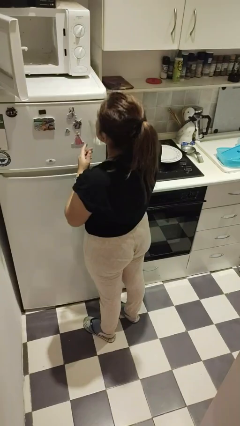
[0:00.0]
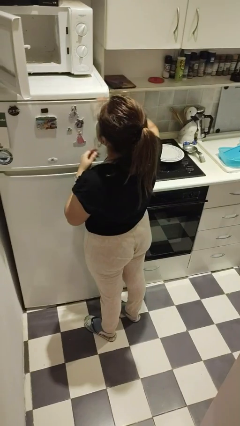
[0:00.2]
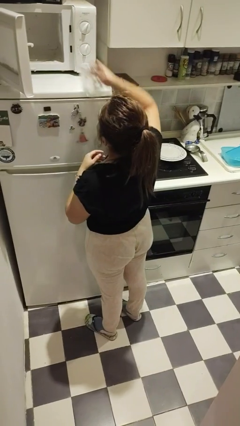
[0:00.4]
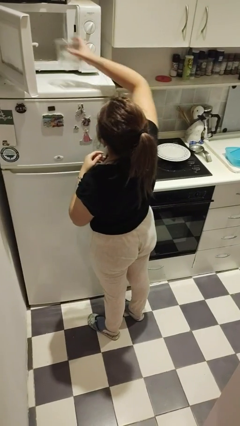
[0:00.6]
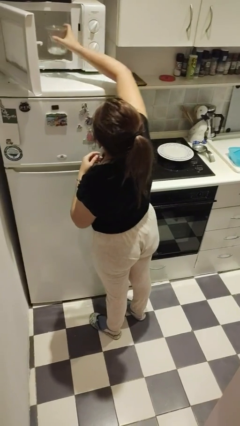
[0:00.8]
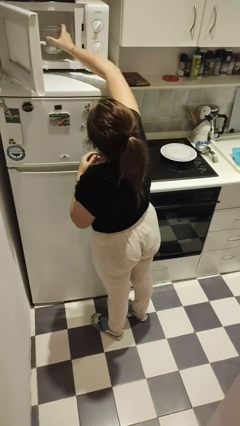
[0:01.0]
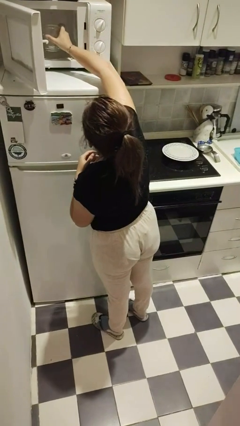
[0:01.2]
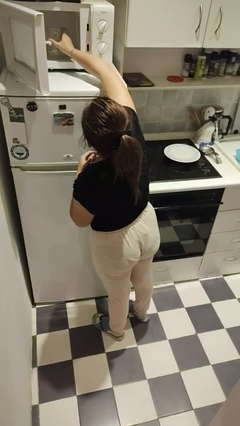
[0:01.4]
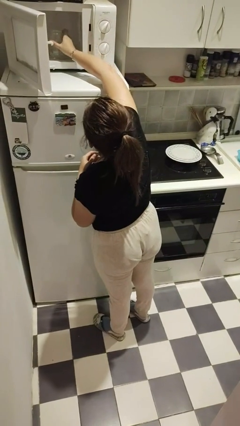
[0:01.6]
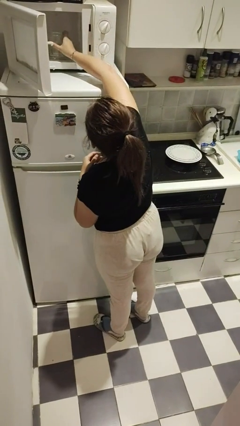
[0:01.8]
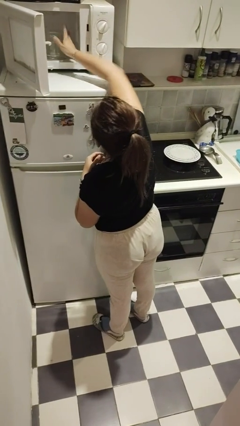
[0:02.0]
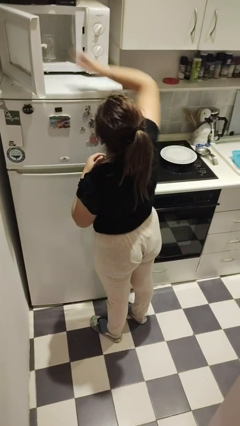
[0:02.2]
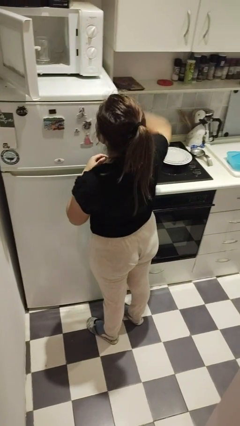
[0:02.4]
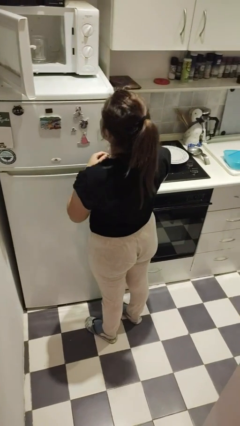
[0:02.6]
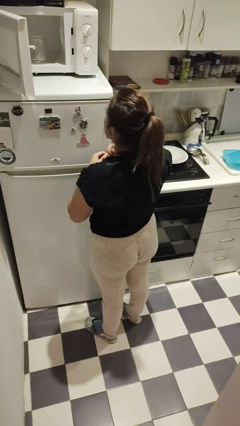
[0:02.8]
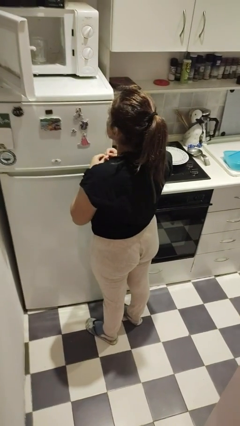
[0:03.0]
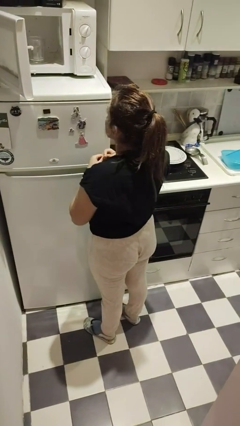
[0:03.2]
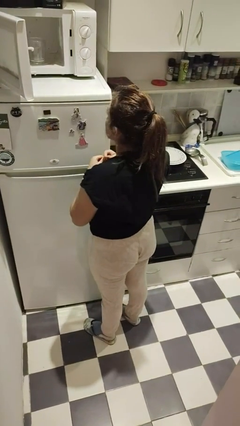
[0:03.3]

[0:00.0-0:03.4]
person puts object into microwave

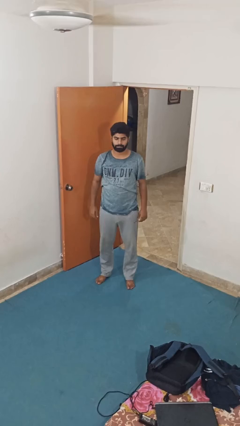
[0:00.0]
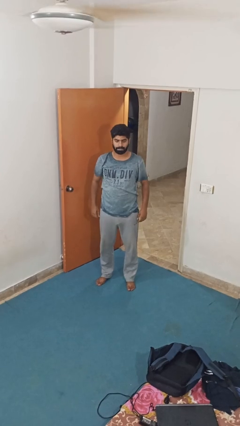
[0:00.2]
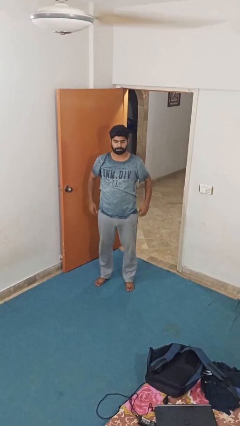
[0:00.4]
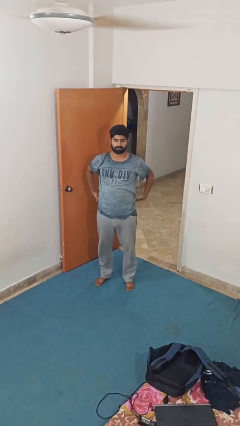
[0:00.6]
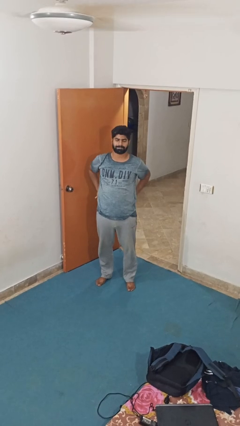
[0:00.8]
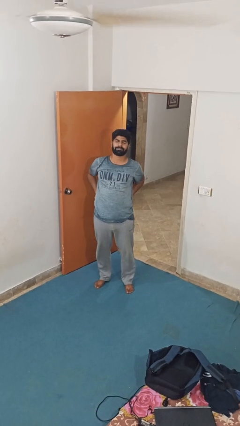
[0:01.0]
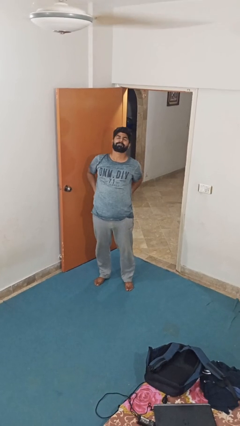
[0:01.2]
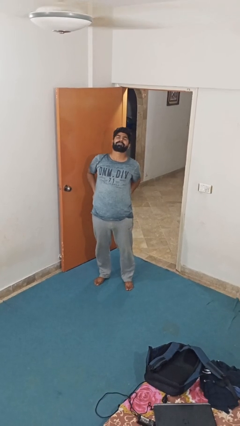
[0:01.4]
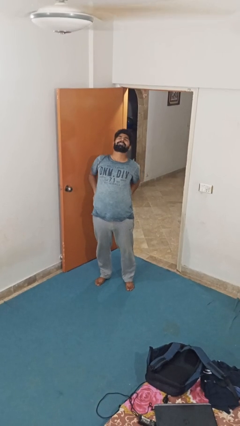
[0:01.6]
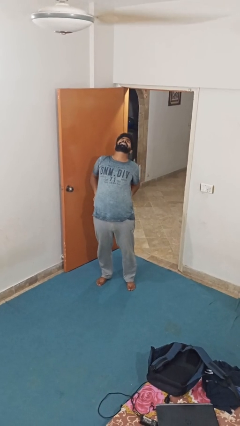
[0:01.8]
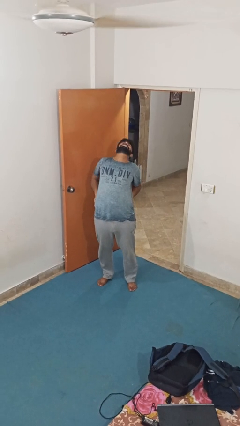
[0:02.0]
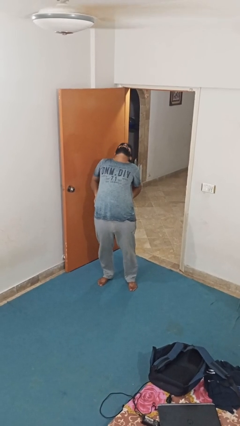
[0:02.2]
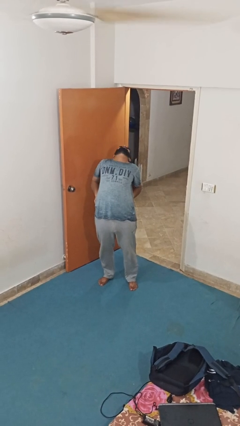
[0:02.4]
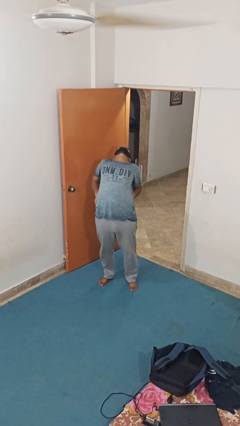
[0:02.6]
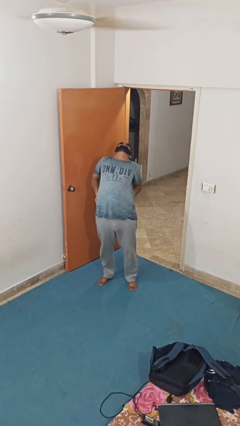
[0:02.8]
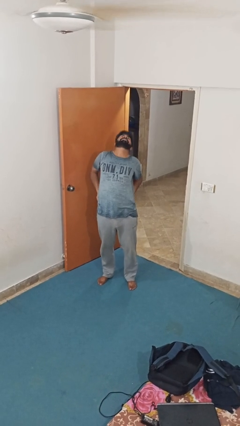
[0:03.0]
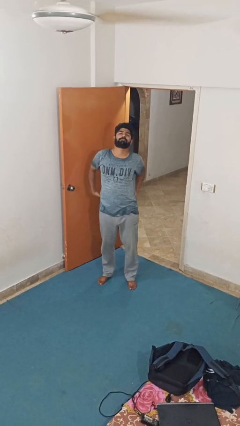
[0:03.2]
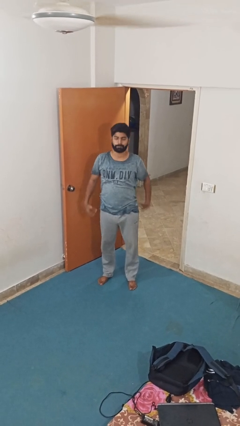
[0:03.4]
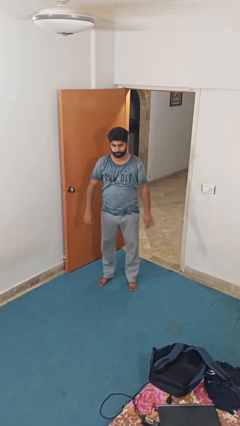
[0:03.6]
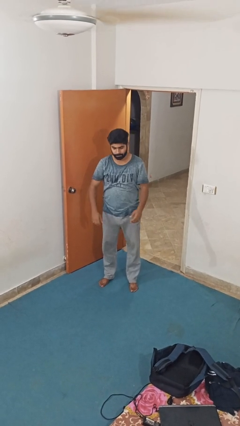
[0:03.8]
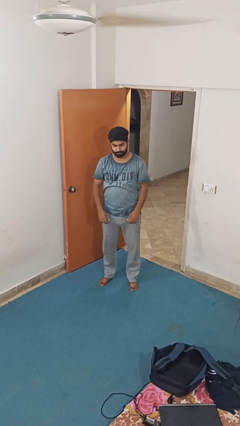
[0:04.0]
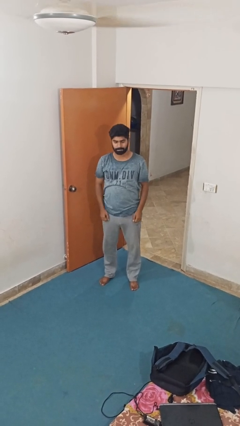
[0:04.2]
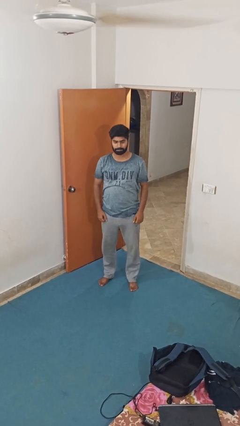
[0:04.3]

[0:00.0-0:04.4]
person stretches back

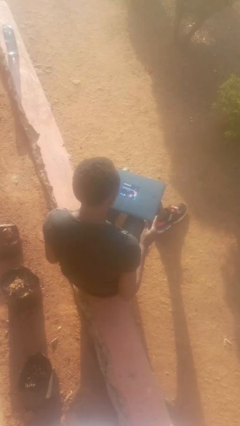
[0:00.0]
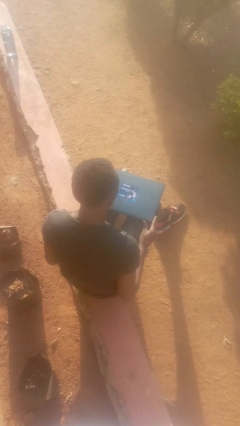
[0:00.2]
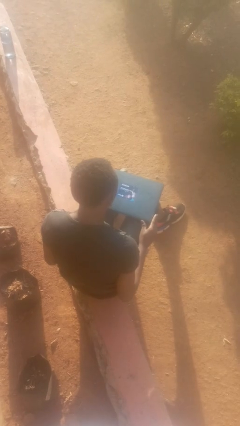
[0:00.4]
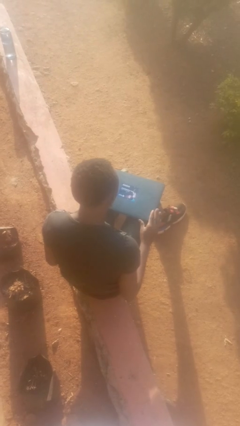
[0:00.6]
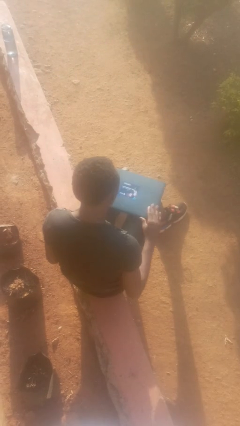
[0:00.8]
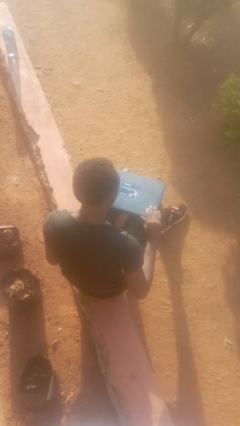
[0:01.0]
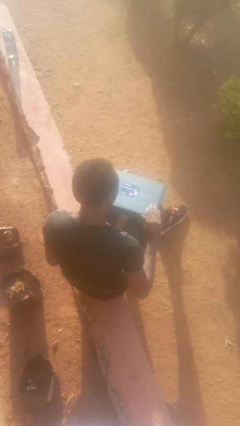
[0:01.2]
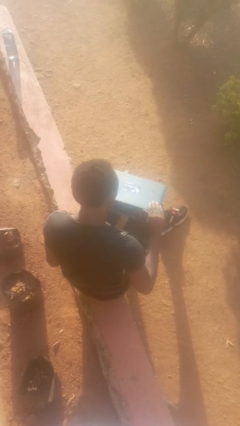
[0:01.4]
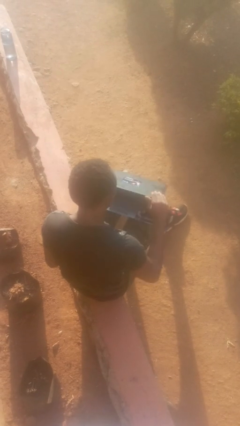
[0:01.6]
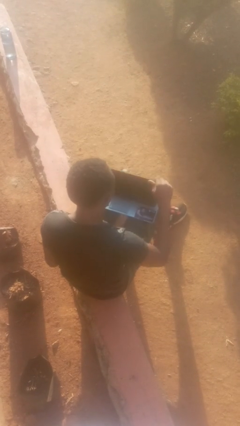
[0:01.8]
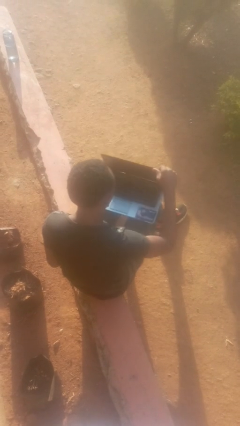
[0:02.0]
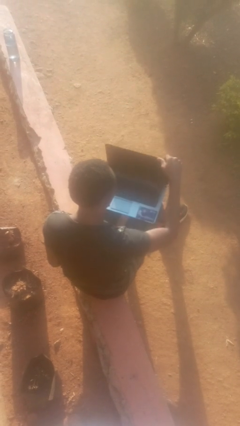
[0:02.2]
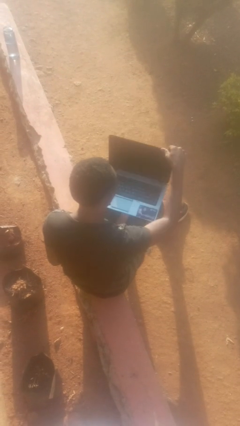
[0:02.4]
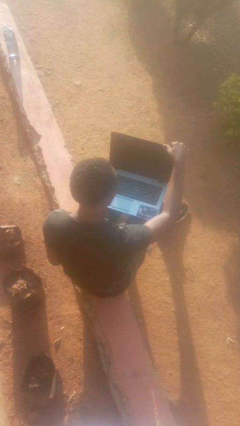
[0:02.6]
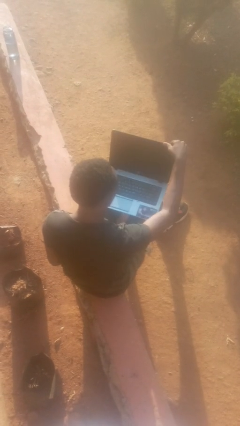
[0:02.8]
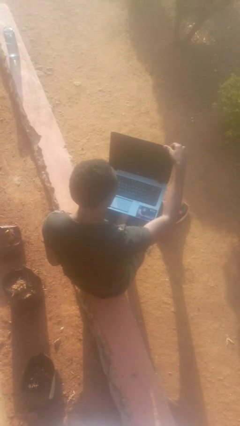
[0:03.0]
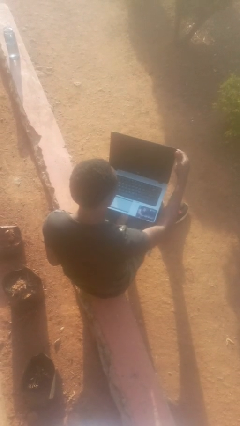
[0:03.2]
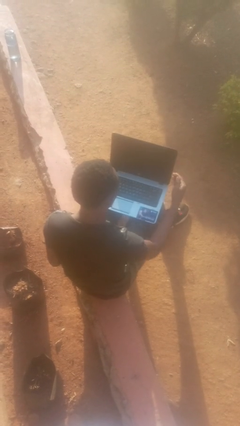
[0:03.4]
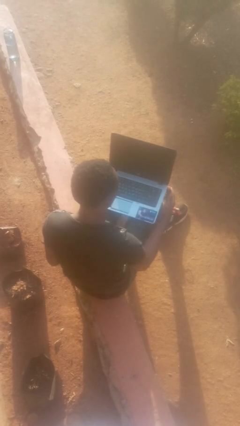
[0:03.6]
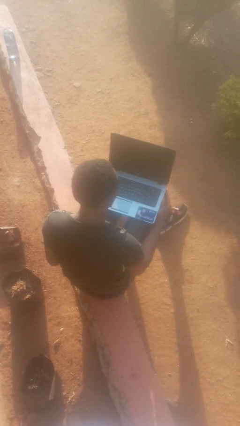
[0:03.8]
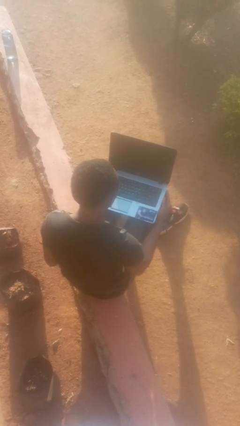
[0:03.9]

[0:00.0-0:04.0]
person opens laptop

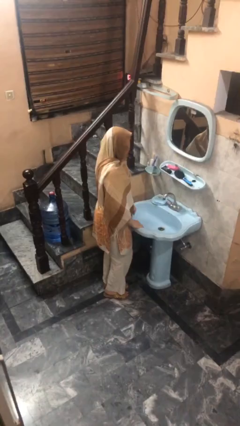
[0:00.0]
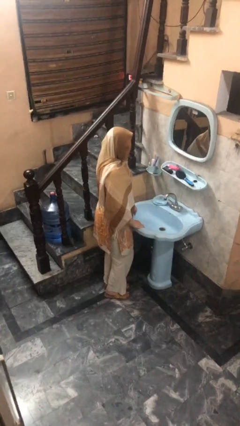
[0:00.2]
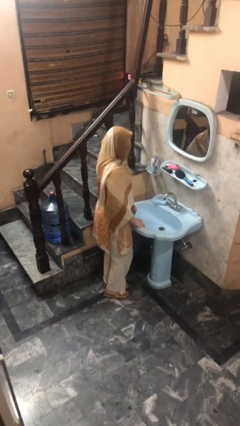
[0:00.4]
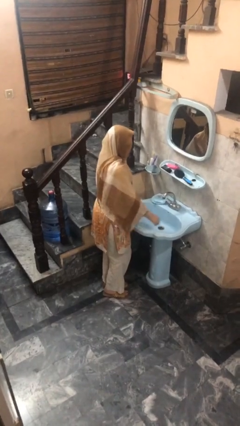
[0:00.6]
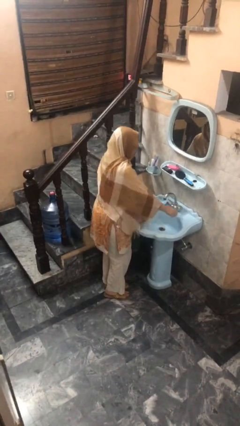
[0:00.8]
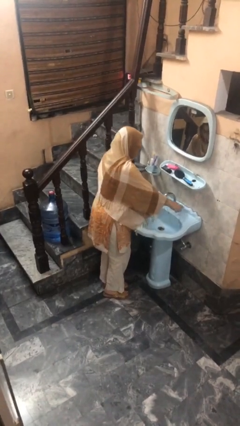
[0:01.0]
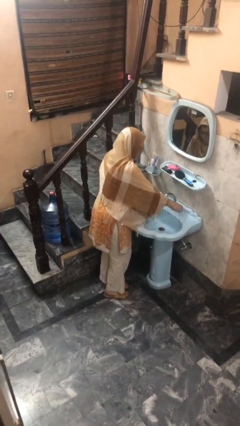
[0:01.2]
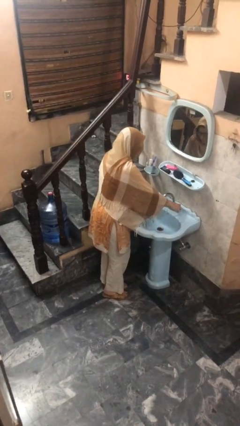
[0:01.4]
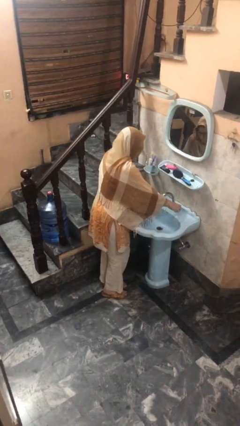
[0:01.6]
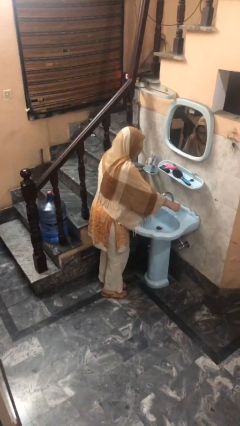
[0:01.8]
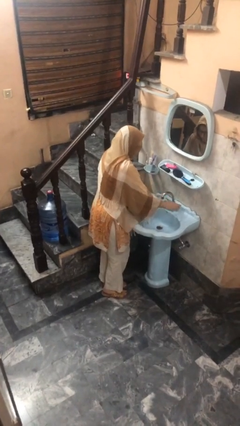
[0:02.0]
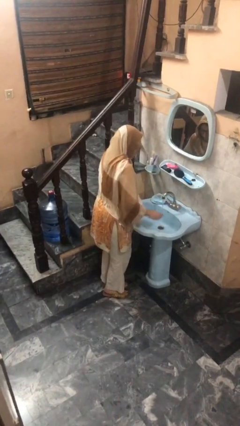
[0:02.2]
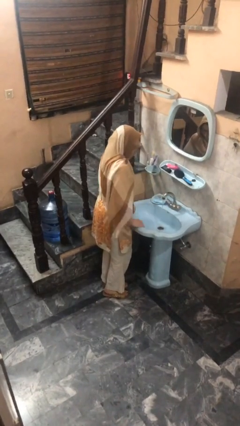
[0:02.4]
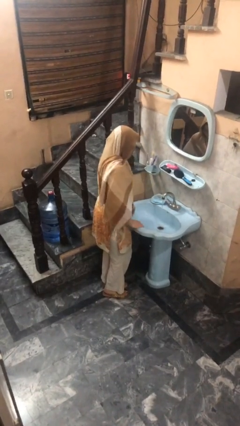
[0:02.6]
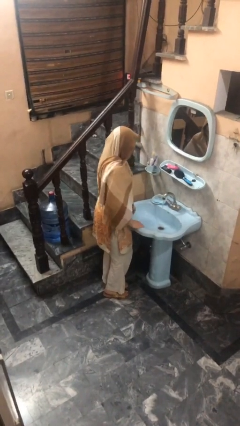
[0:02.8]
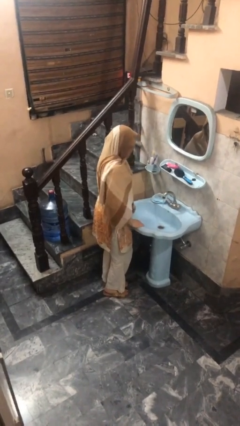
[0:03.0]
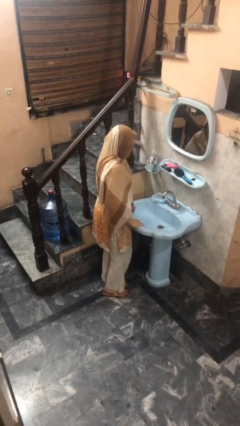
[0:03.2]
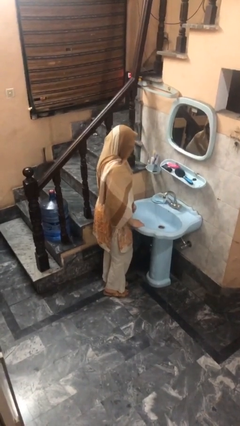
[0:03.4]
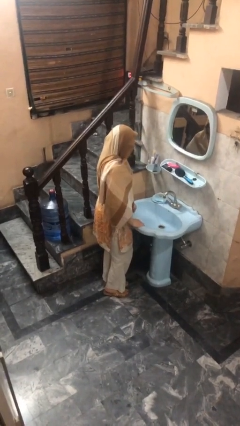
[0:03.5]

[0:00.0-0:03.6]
person turns on faucet

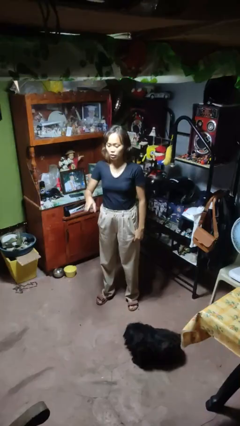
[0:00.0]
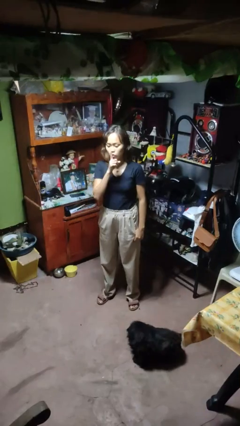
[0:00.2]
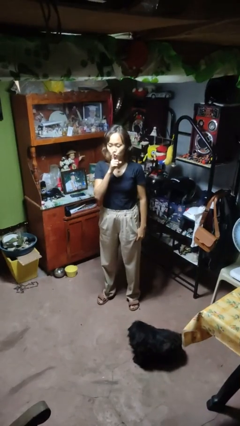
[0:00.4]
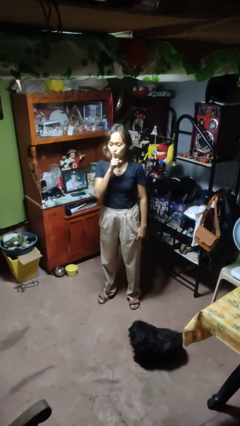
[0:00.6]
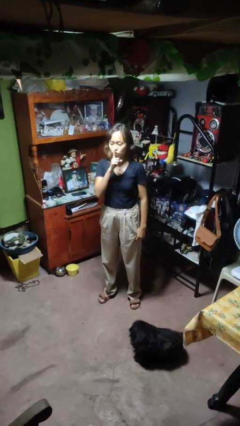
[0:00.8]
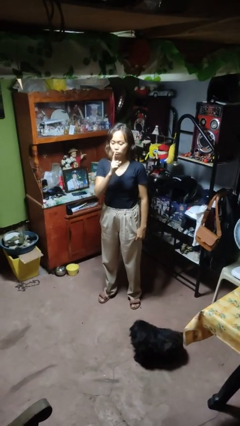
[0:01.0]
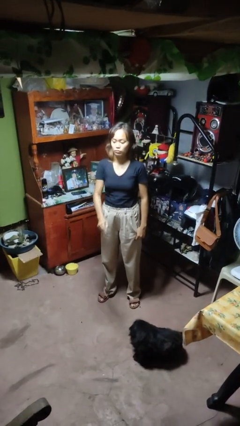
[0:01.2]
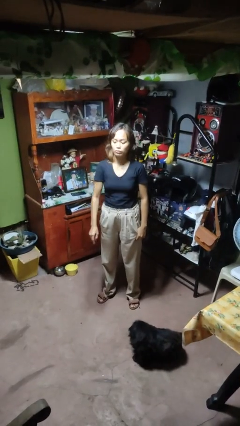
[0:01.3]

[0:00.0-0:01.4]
person gestures be quiet

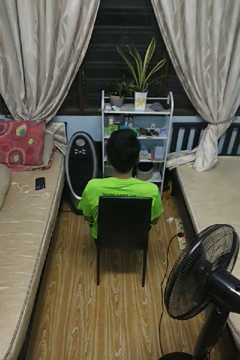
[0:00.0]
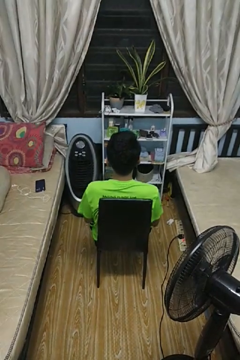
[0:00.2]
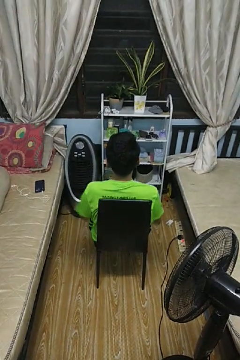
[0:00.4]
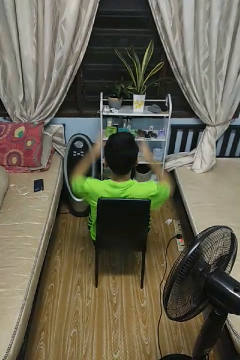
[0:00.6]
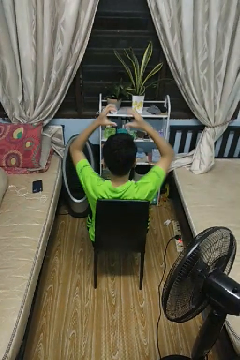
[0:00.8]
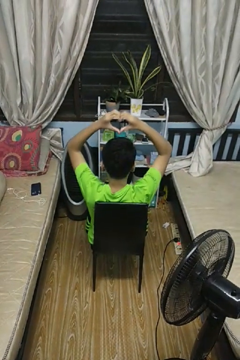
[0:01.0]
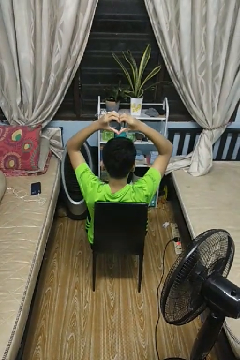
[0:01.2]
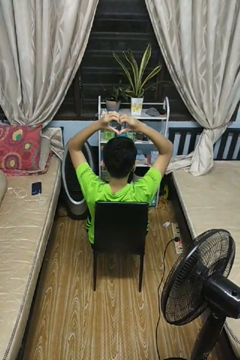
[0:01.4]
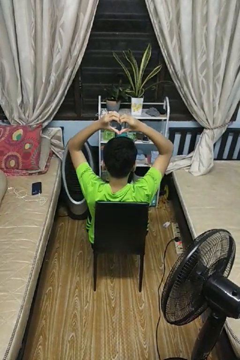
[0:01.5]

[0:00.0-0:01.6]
person gestures heart
